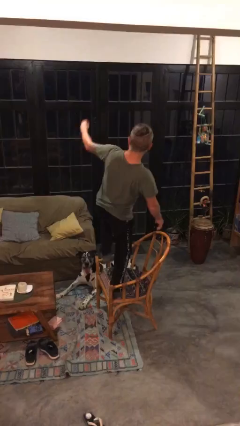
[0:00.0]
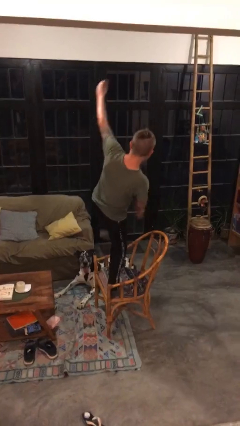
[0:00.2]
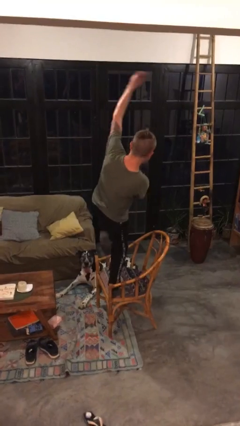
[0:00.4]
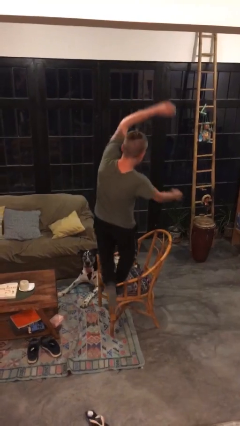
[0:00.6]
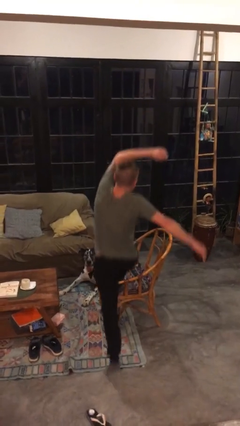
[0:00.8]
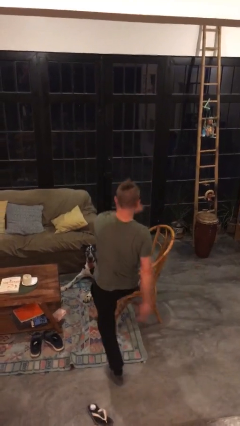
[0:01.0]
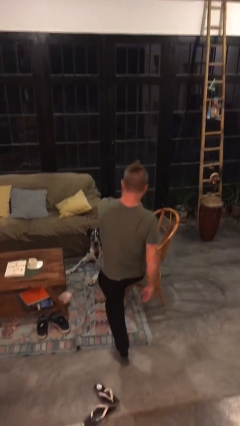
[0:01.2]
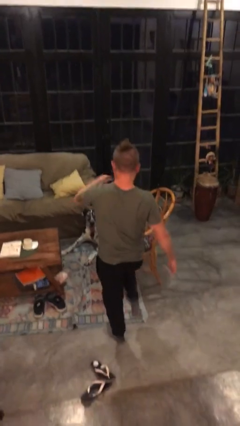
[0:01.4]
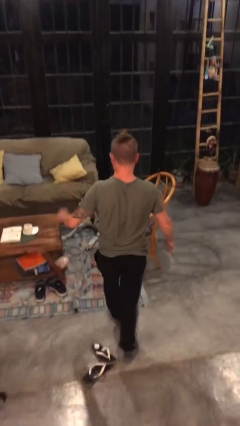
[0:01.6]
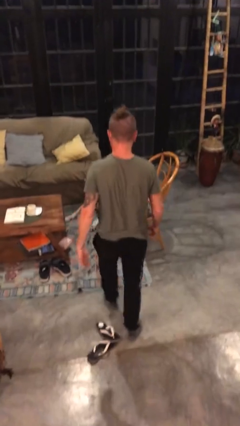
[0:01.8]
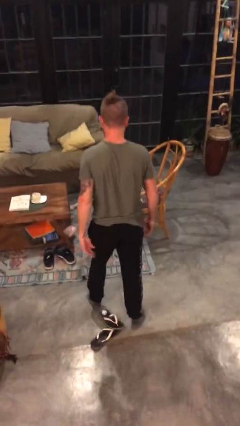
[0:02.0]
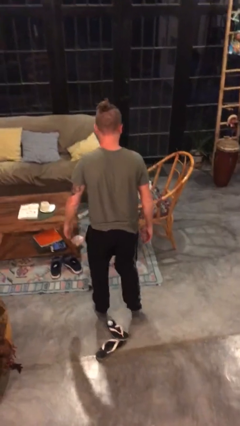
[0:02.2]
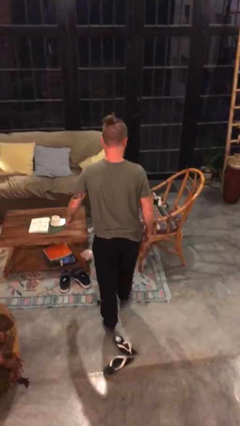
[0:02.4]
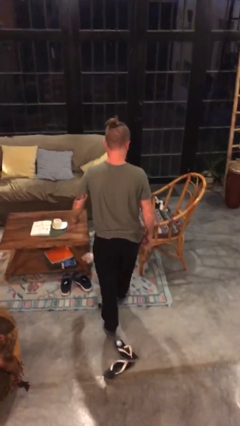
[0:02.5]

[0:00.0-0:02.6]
person climbs off chair

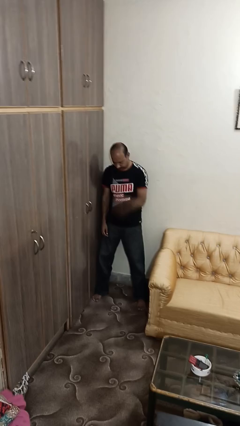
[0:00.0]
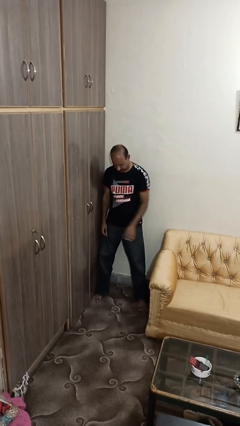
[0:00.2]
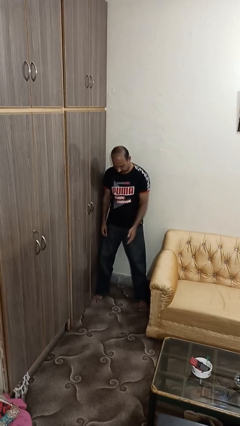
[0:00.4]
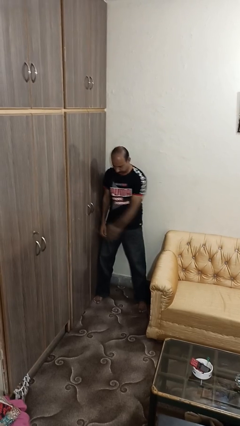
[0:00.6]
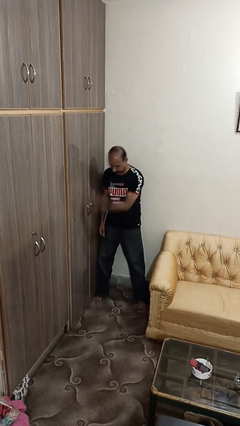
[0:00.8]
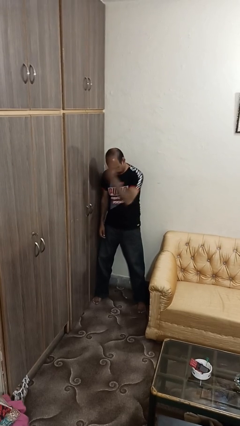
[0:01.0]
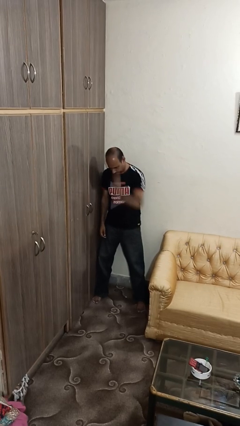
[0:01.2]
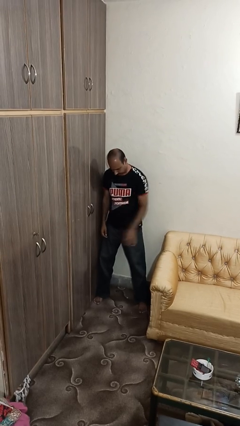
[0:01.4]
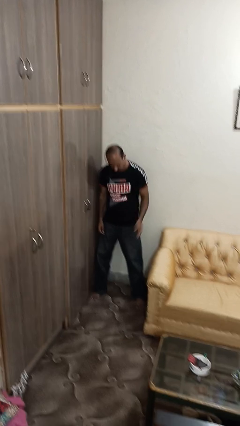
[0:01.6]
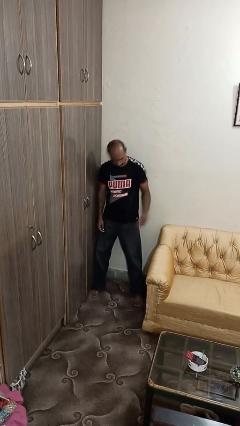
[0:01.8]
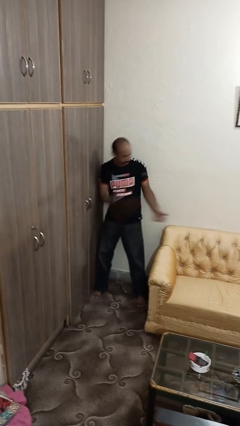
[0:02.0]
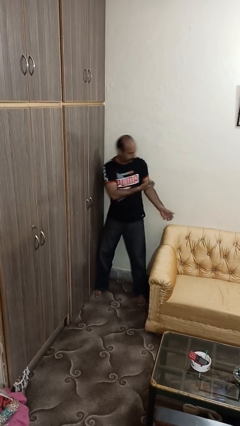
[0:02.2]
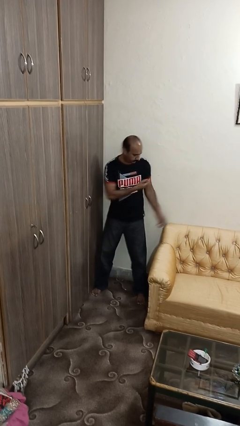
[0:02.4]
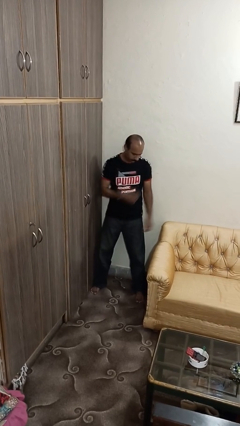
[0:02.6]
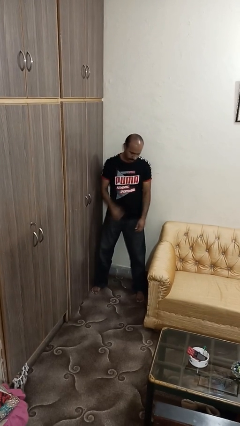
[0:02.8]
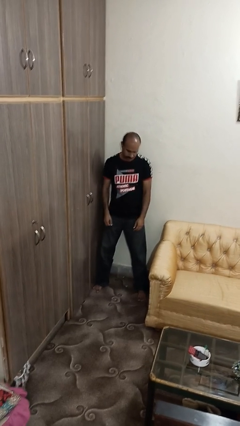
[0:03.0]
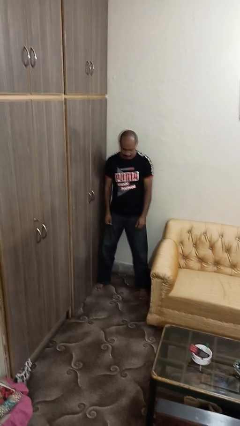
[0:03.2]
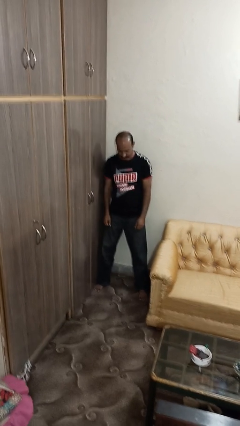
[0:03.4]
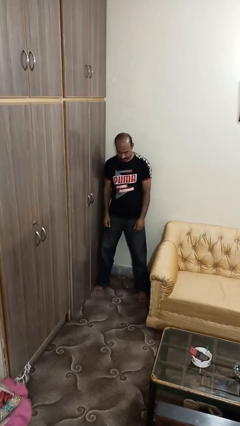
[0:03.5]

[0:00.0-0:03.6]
person bounces ball on floor

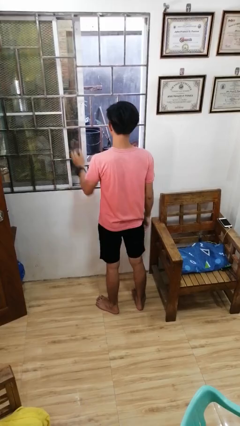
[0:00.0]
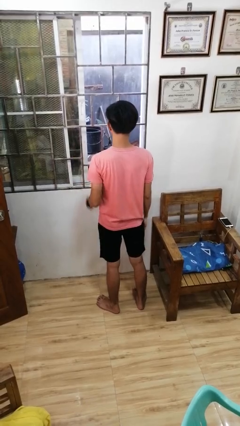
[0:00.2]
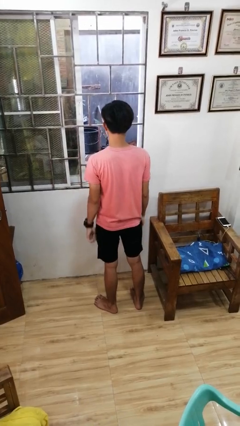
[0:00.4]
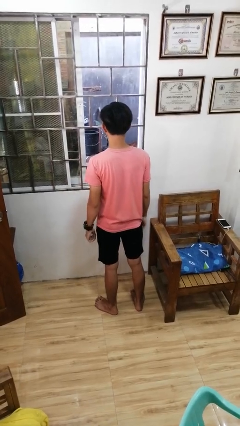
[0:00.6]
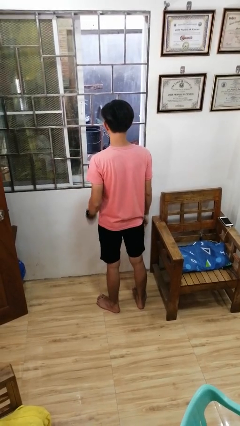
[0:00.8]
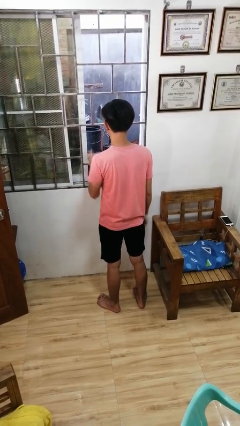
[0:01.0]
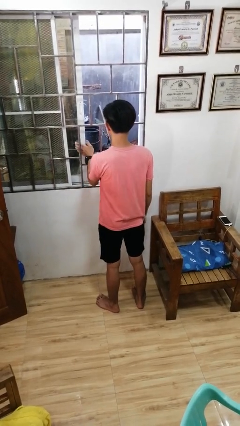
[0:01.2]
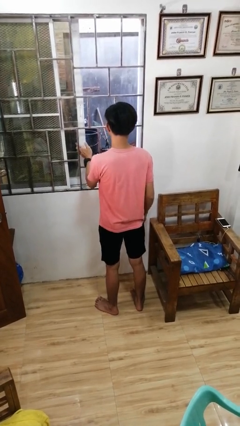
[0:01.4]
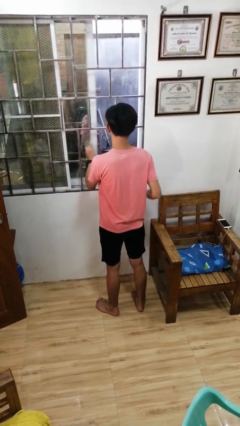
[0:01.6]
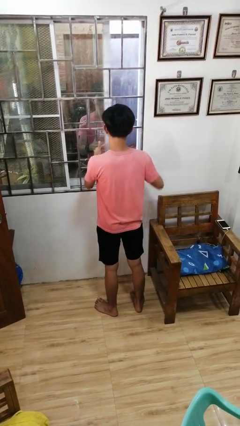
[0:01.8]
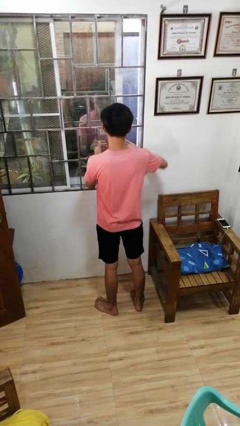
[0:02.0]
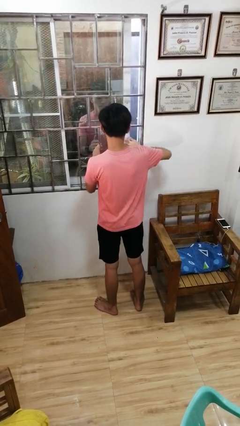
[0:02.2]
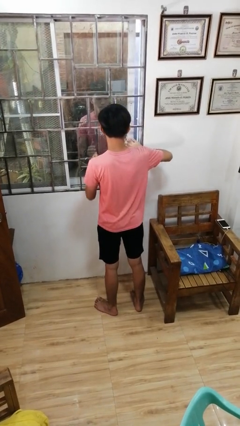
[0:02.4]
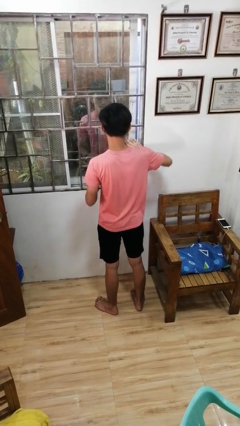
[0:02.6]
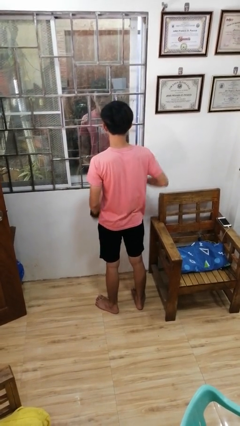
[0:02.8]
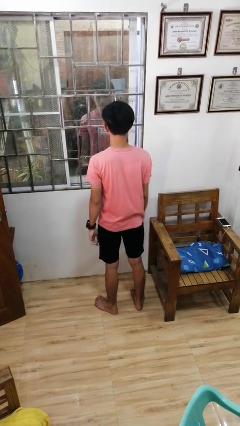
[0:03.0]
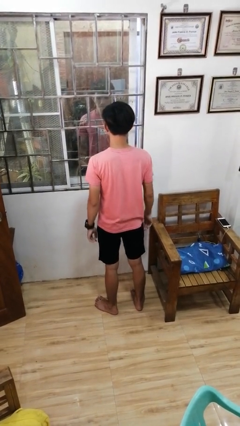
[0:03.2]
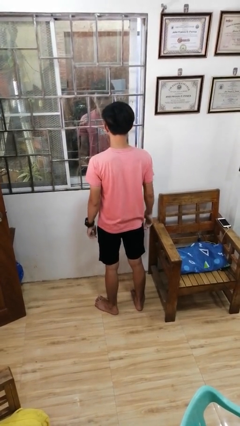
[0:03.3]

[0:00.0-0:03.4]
person closes home window

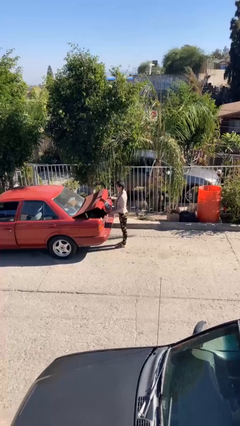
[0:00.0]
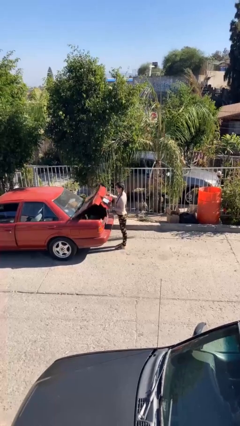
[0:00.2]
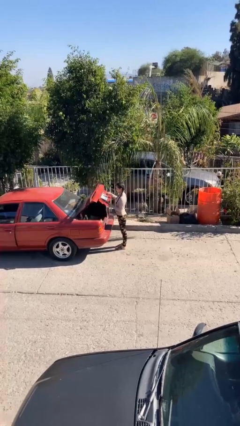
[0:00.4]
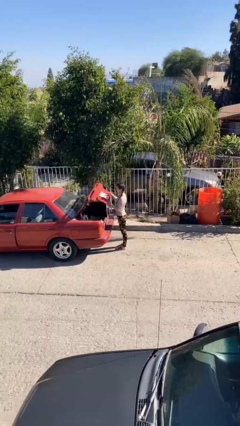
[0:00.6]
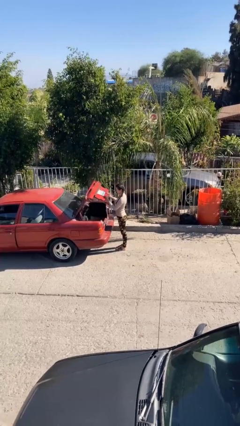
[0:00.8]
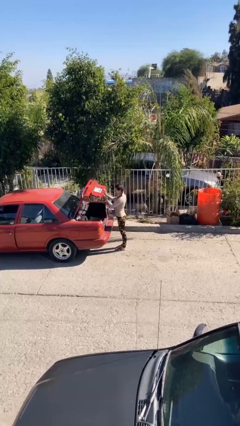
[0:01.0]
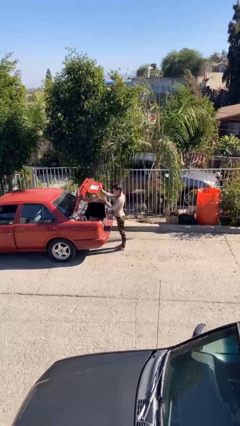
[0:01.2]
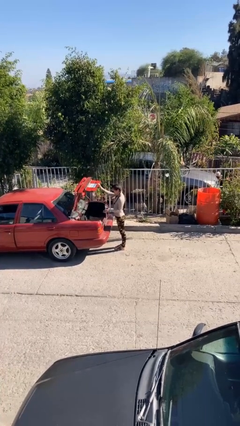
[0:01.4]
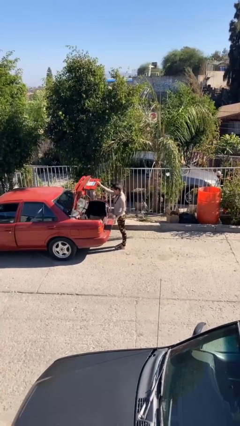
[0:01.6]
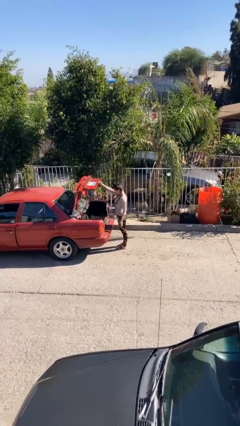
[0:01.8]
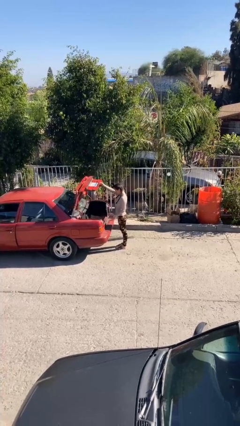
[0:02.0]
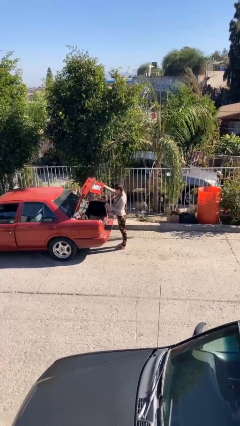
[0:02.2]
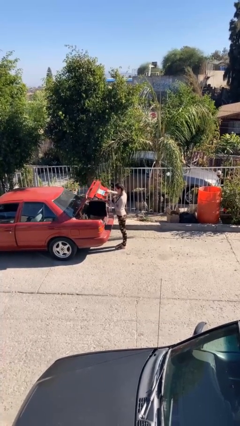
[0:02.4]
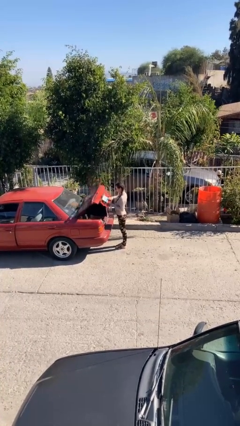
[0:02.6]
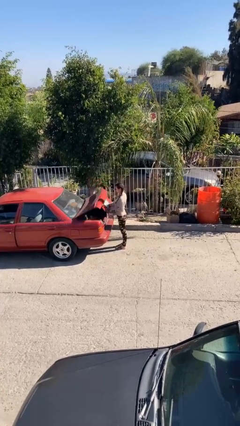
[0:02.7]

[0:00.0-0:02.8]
person opens car trunk

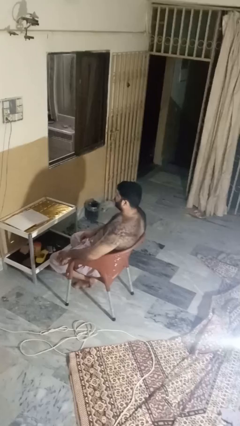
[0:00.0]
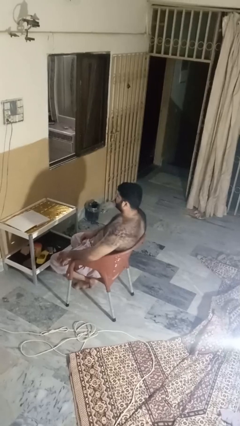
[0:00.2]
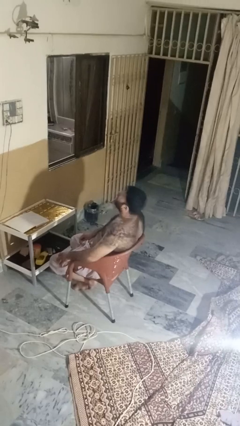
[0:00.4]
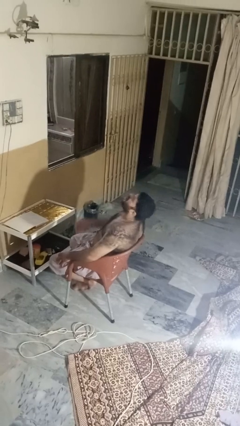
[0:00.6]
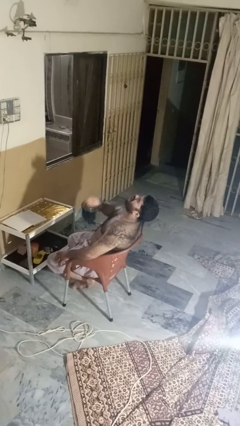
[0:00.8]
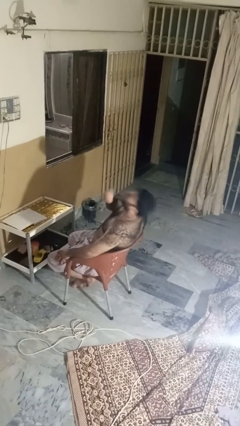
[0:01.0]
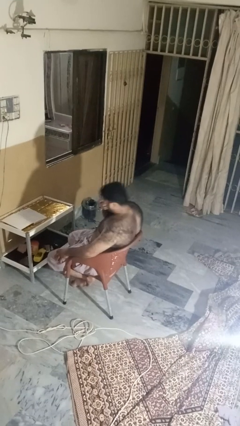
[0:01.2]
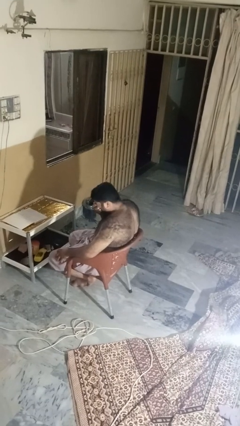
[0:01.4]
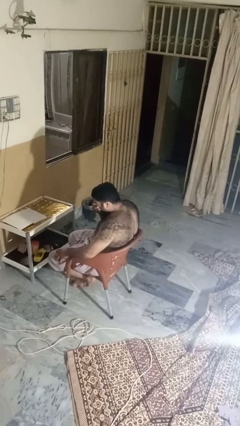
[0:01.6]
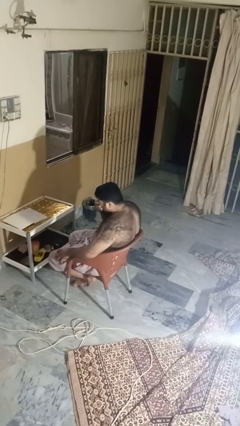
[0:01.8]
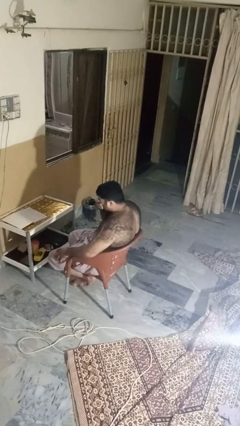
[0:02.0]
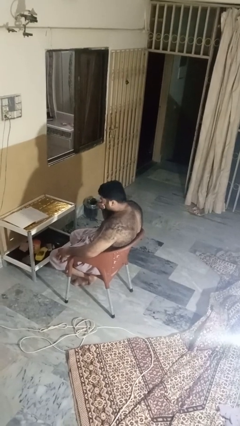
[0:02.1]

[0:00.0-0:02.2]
person sneezes into hand

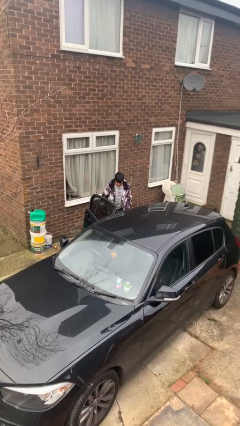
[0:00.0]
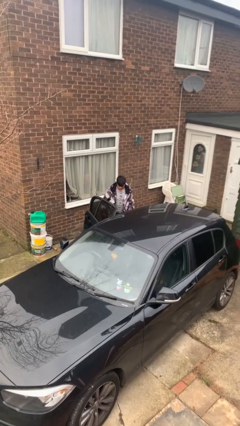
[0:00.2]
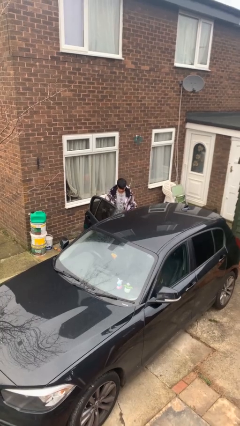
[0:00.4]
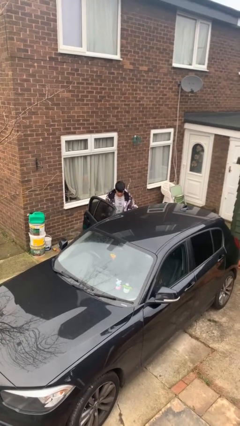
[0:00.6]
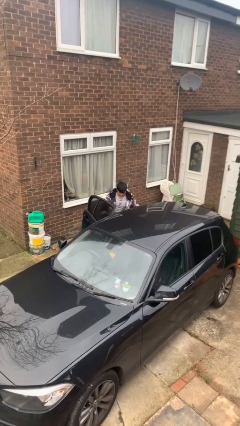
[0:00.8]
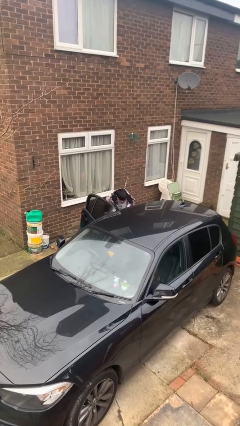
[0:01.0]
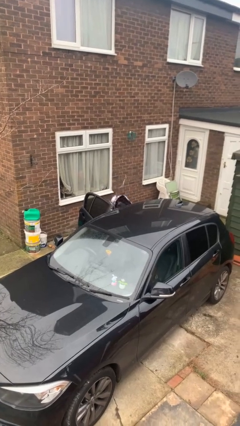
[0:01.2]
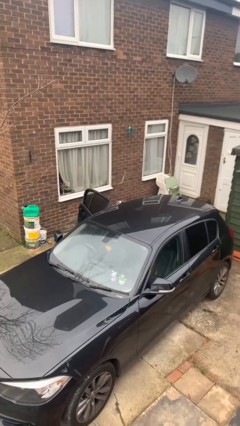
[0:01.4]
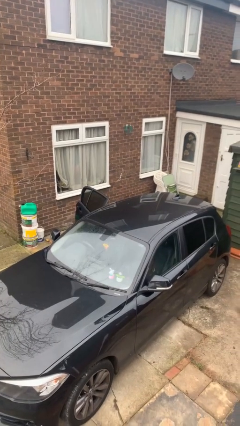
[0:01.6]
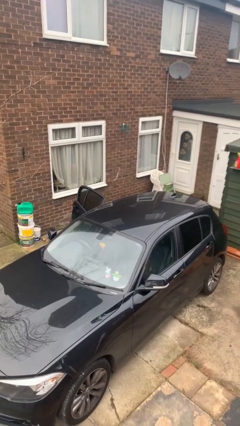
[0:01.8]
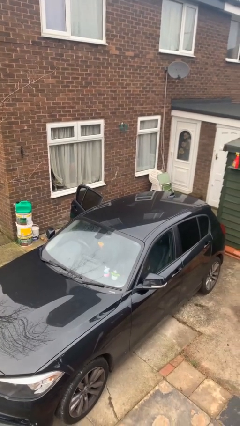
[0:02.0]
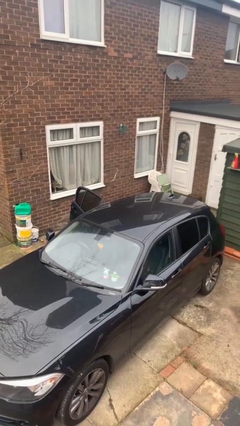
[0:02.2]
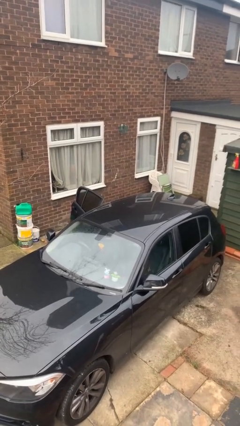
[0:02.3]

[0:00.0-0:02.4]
person enters car
